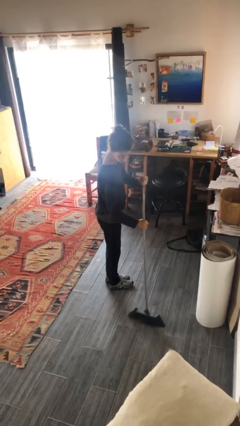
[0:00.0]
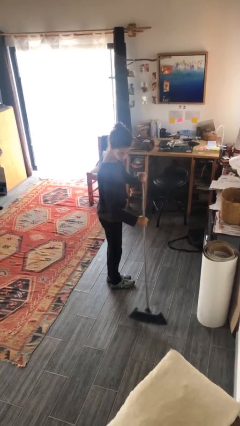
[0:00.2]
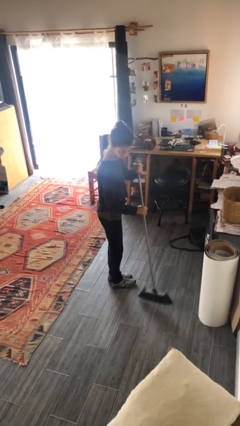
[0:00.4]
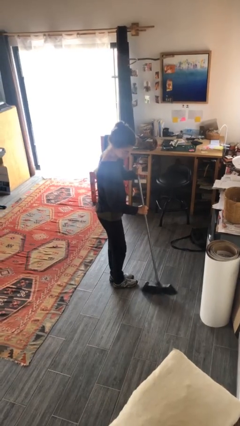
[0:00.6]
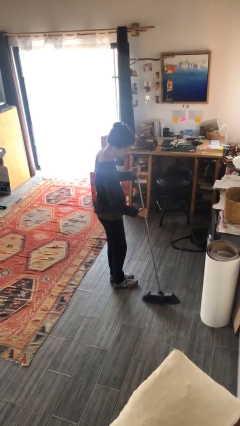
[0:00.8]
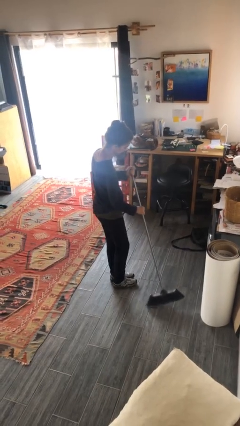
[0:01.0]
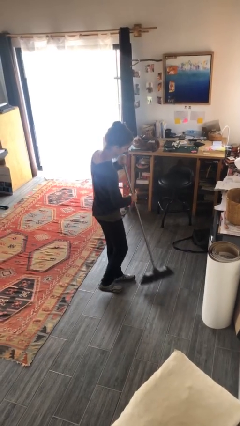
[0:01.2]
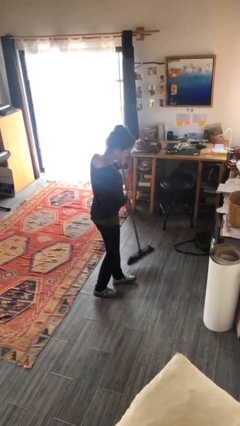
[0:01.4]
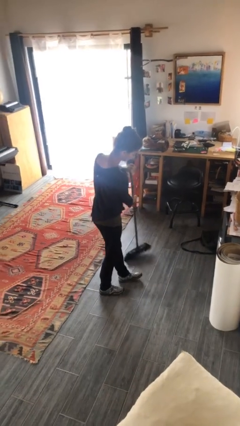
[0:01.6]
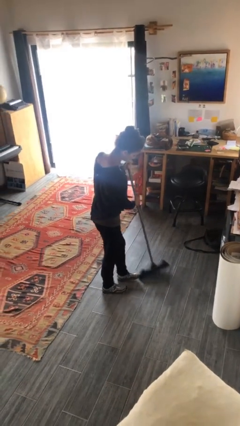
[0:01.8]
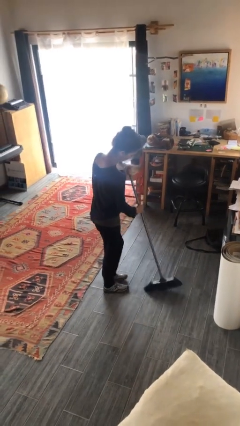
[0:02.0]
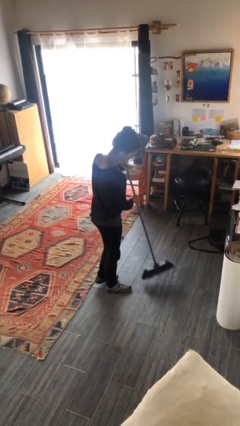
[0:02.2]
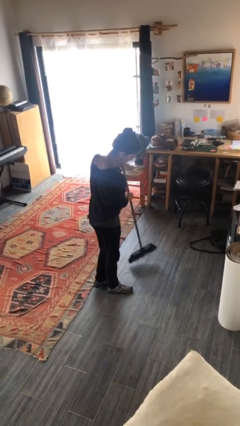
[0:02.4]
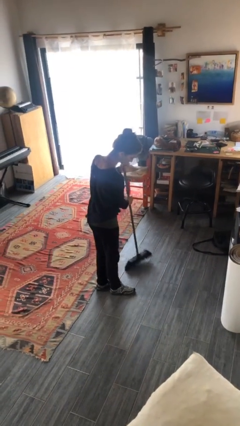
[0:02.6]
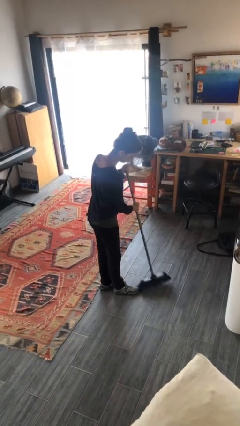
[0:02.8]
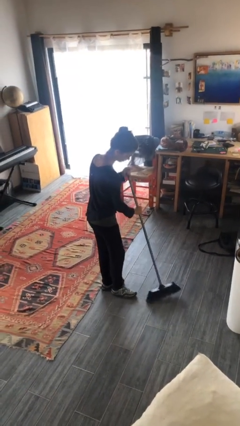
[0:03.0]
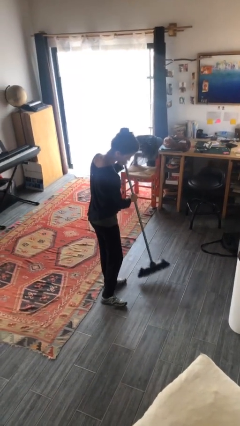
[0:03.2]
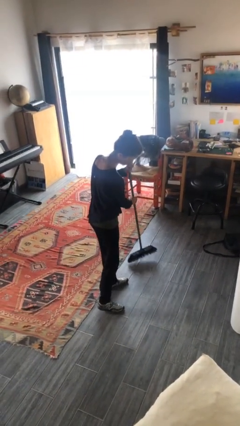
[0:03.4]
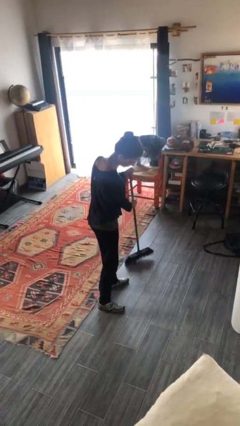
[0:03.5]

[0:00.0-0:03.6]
person sweeps floor

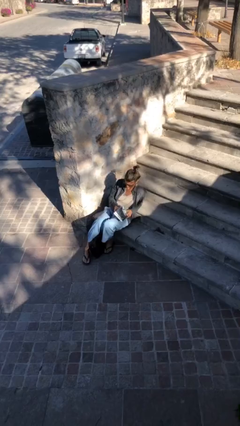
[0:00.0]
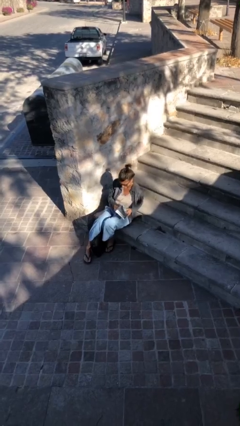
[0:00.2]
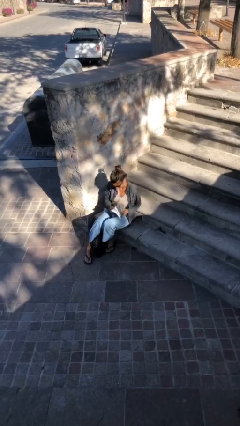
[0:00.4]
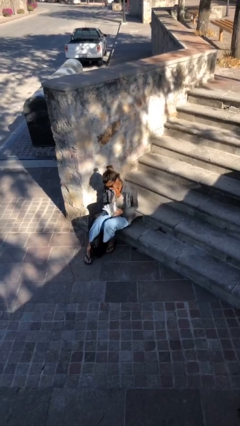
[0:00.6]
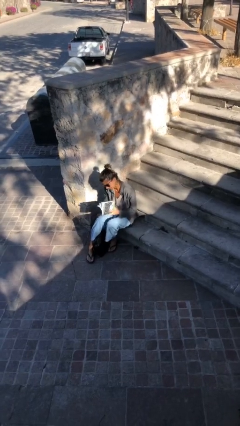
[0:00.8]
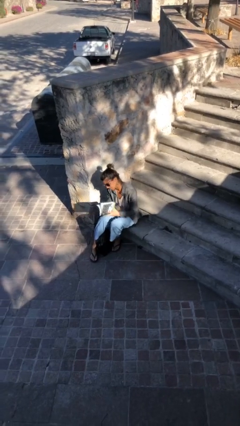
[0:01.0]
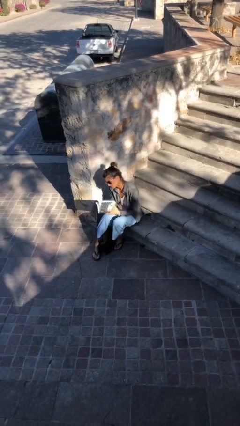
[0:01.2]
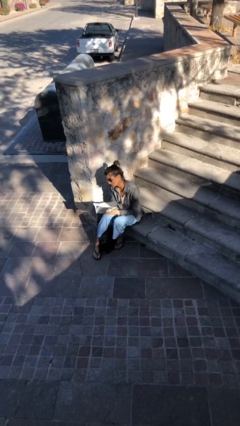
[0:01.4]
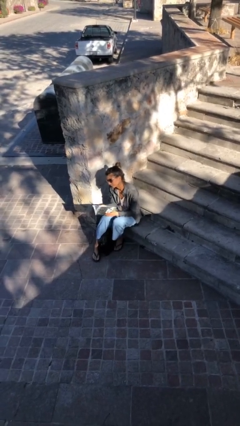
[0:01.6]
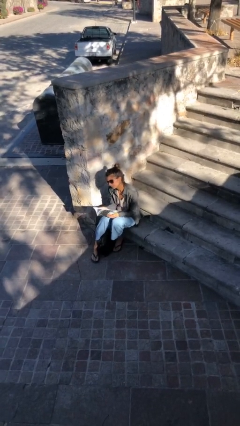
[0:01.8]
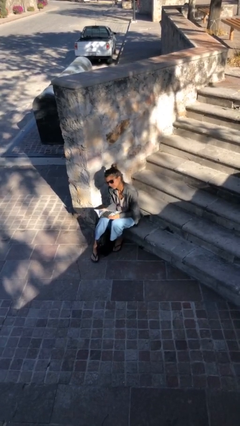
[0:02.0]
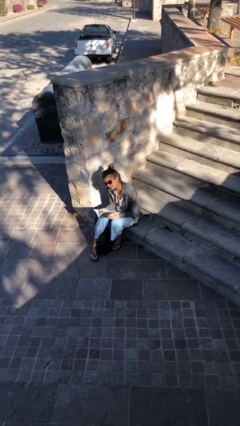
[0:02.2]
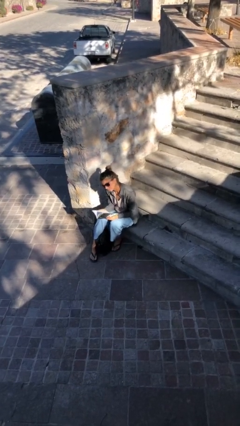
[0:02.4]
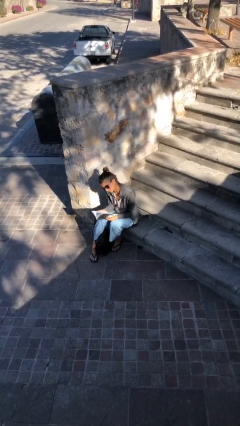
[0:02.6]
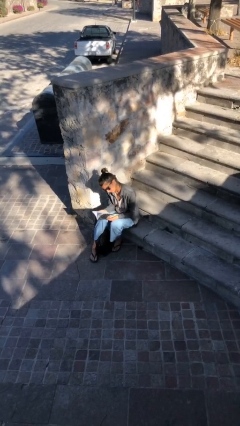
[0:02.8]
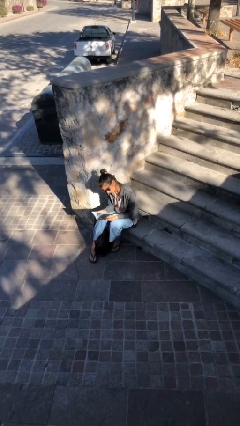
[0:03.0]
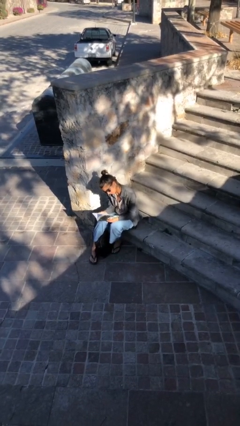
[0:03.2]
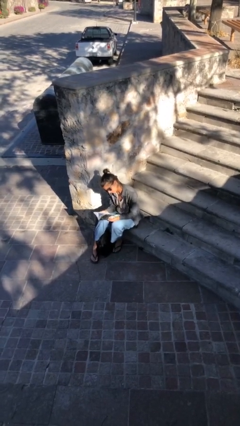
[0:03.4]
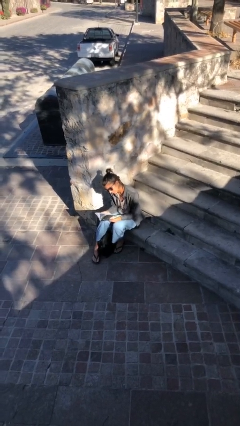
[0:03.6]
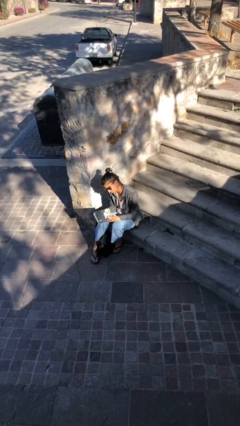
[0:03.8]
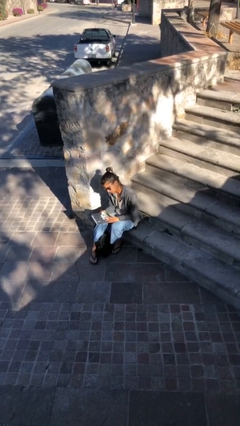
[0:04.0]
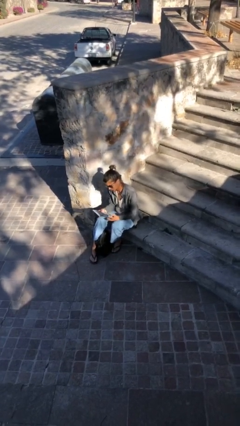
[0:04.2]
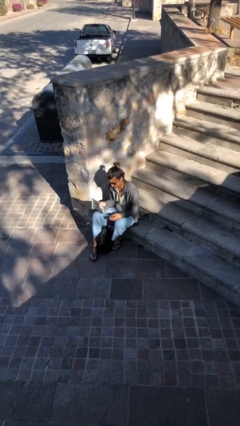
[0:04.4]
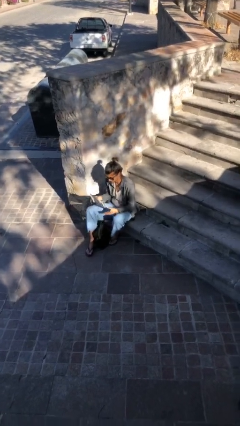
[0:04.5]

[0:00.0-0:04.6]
person reads document

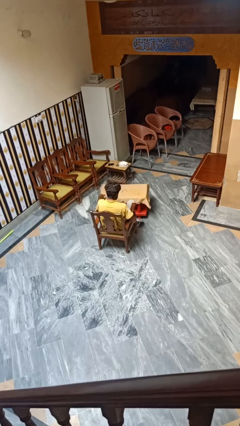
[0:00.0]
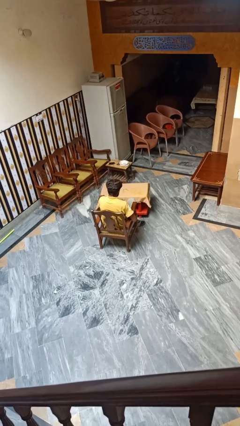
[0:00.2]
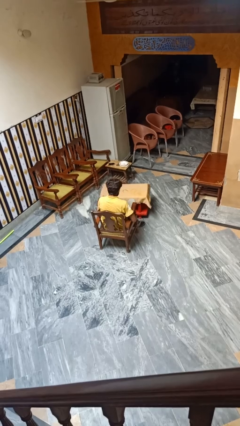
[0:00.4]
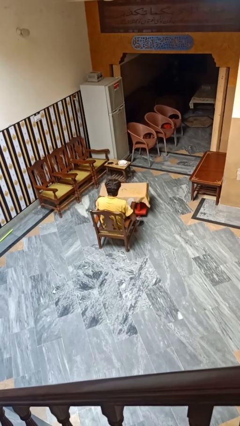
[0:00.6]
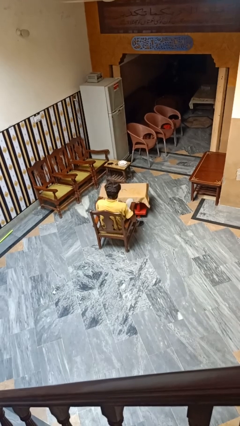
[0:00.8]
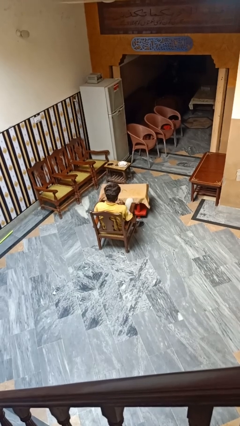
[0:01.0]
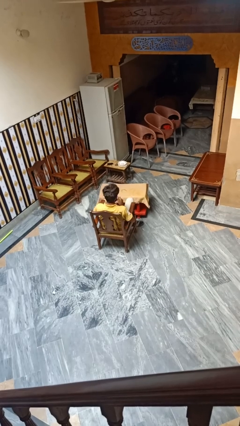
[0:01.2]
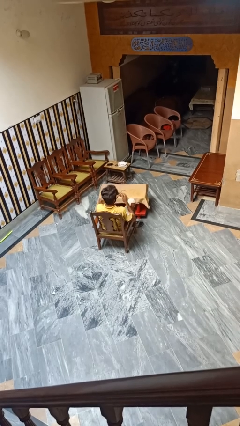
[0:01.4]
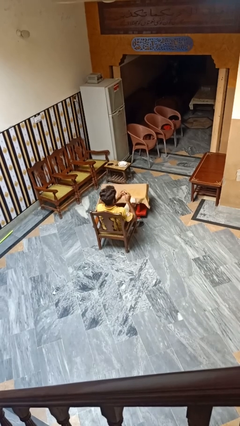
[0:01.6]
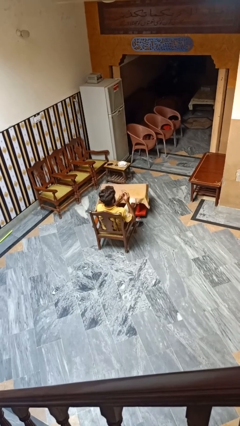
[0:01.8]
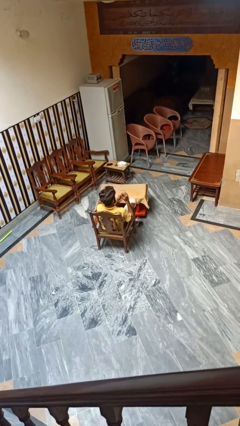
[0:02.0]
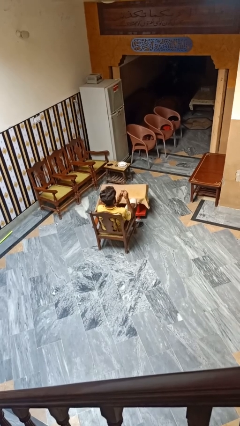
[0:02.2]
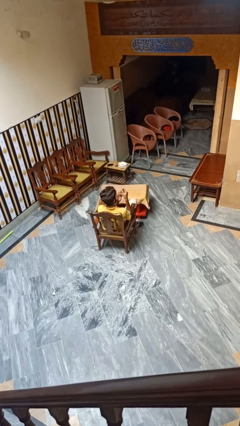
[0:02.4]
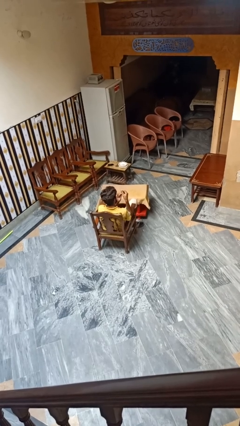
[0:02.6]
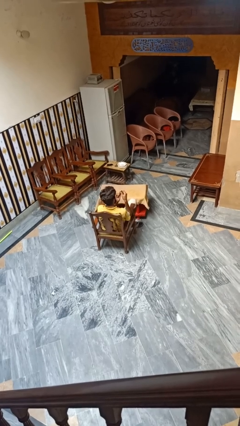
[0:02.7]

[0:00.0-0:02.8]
person clips fingernails

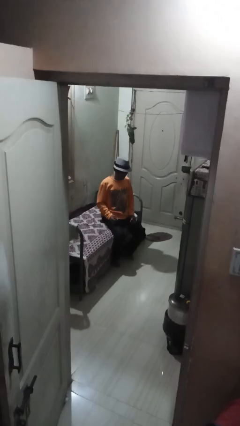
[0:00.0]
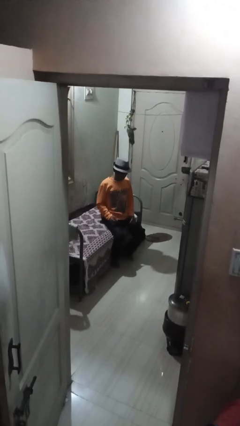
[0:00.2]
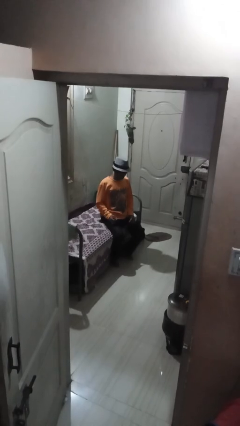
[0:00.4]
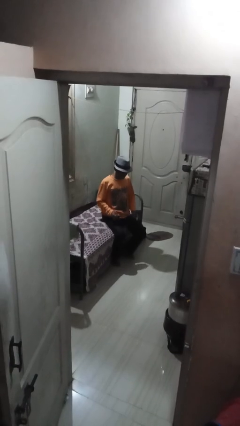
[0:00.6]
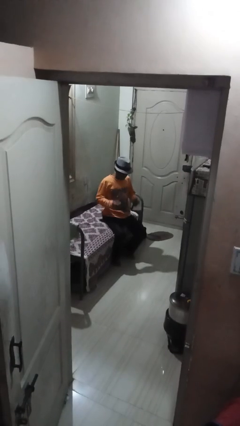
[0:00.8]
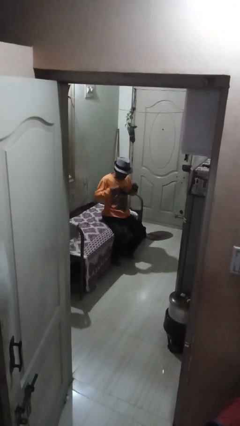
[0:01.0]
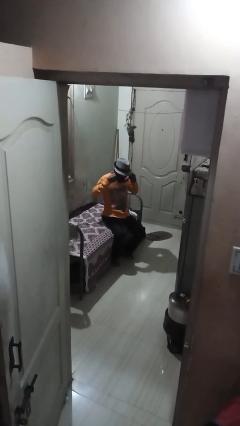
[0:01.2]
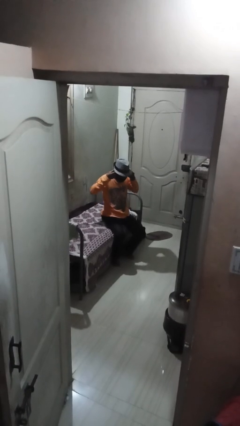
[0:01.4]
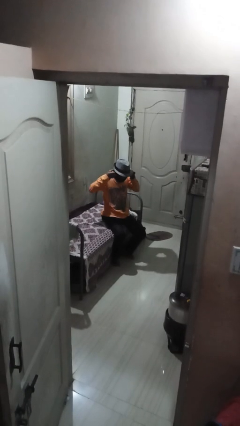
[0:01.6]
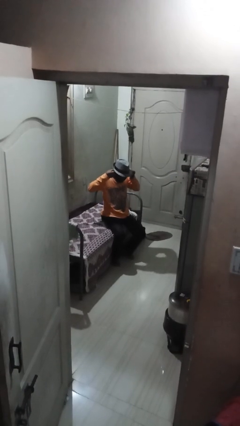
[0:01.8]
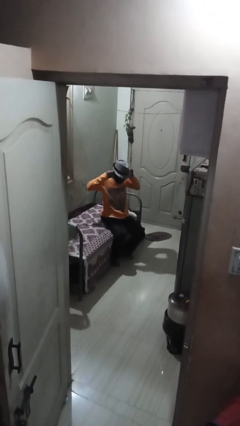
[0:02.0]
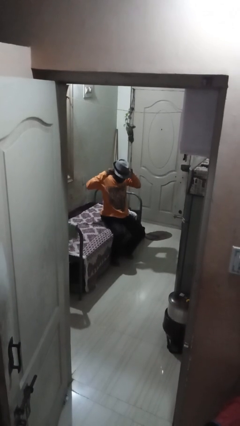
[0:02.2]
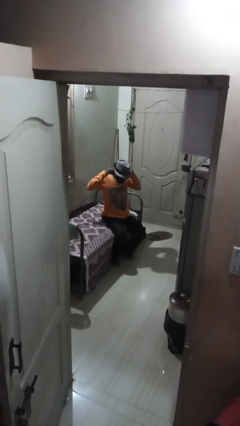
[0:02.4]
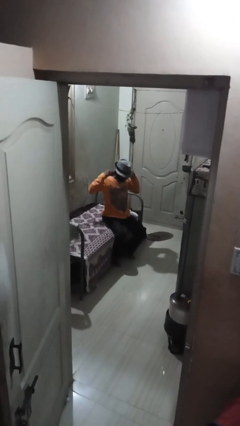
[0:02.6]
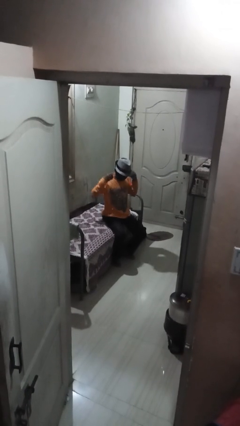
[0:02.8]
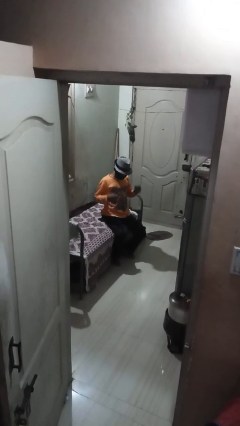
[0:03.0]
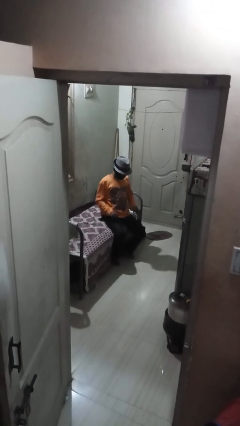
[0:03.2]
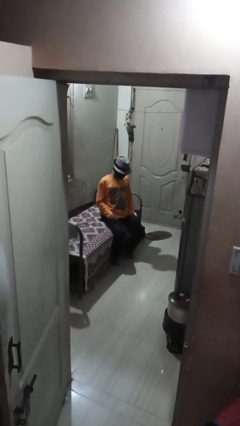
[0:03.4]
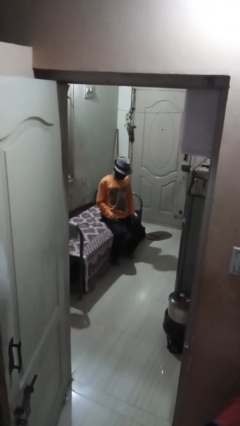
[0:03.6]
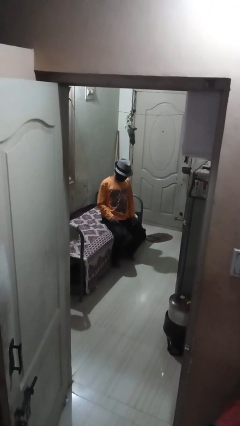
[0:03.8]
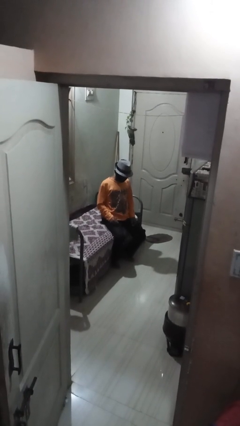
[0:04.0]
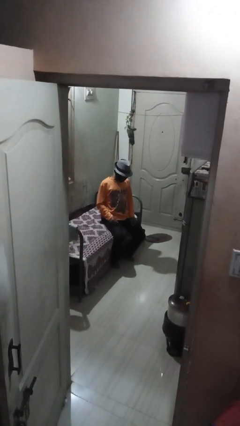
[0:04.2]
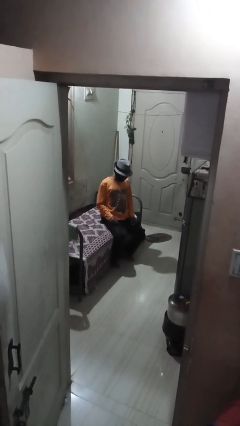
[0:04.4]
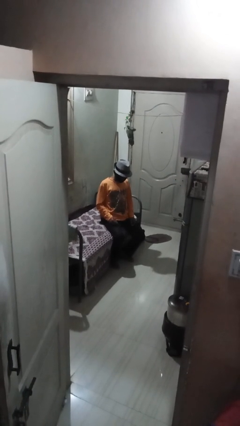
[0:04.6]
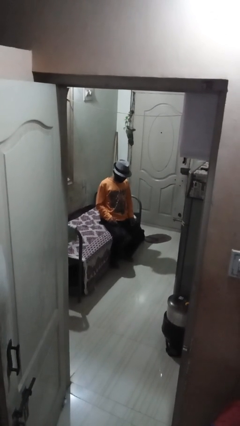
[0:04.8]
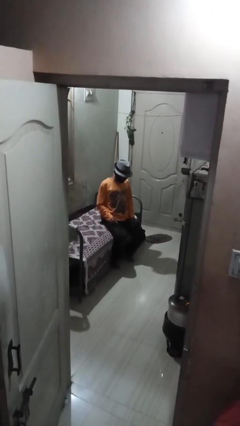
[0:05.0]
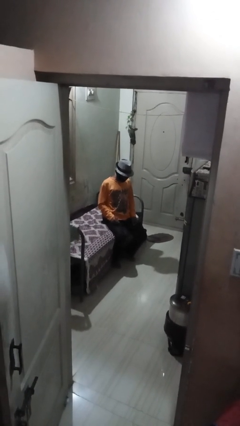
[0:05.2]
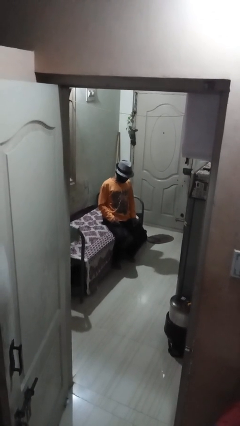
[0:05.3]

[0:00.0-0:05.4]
person puts on facemask

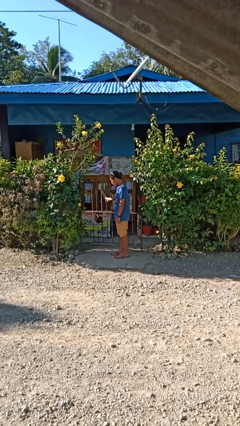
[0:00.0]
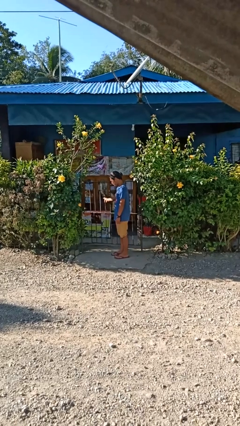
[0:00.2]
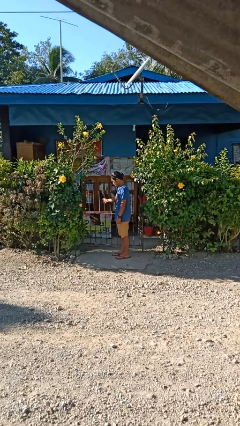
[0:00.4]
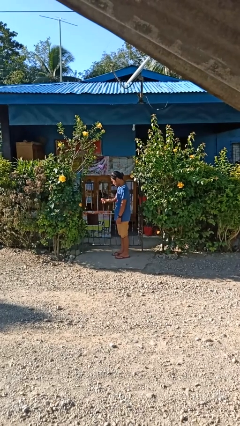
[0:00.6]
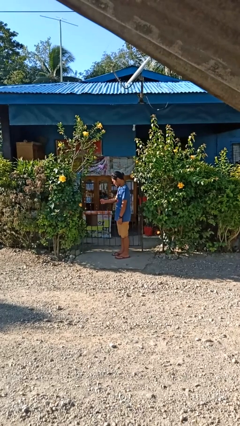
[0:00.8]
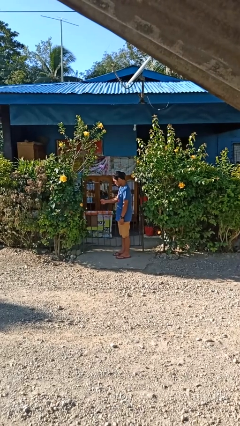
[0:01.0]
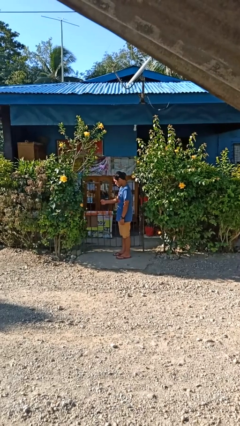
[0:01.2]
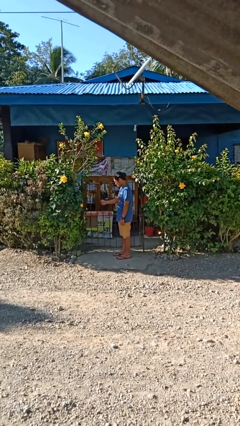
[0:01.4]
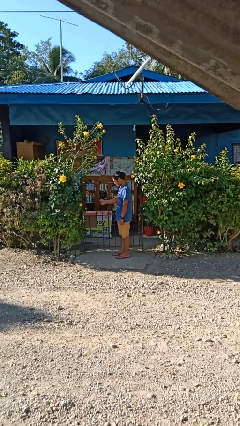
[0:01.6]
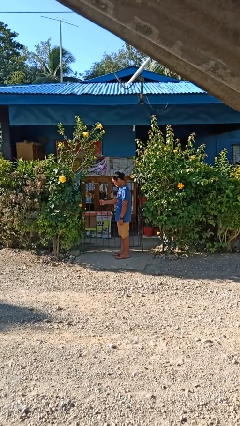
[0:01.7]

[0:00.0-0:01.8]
person closes gate
